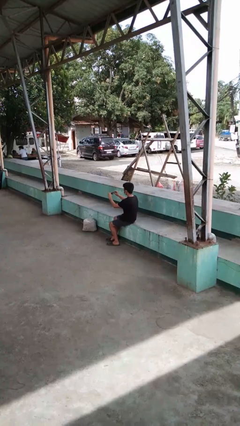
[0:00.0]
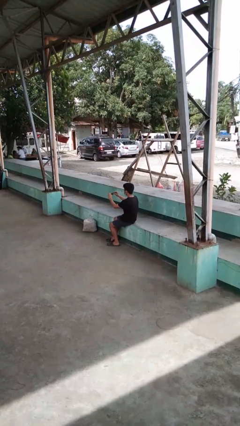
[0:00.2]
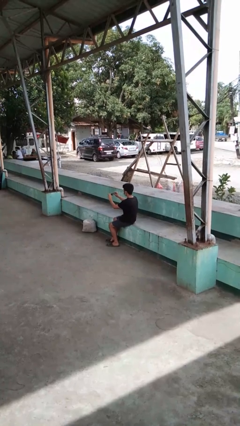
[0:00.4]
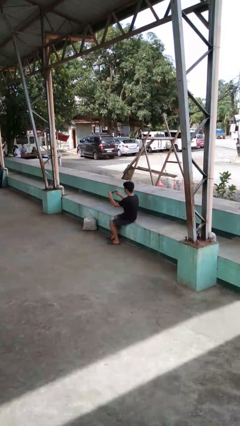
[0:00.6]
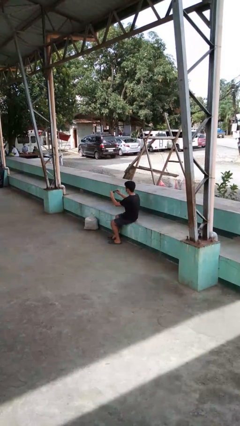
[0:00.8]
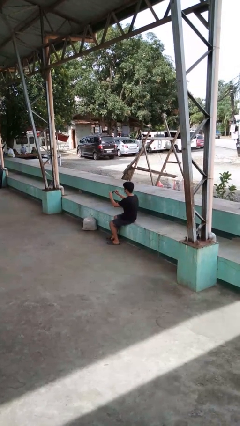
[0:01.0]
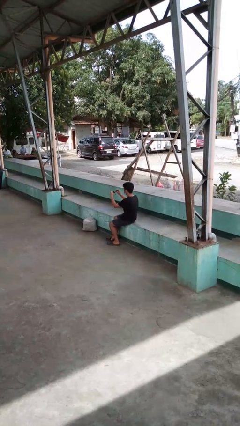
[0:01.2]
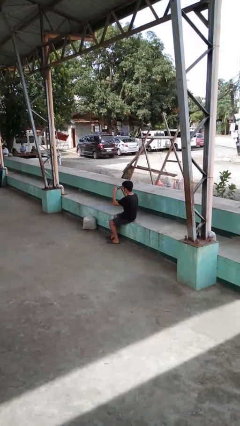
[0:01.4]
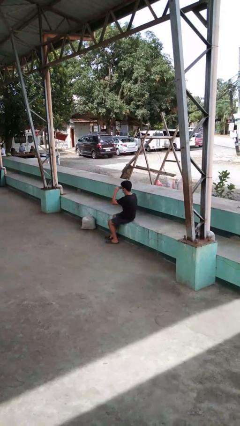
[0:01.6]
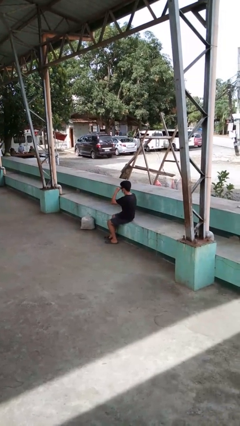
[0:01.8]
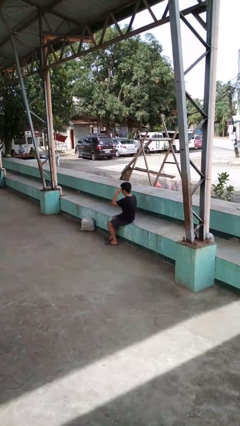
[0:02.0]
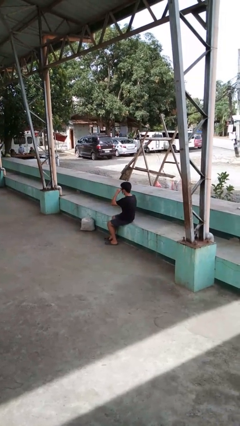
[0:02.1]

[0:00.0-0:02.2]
person brushes hair

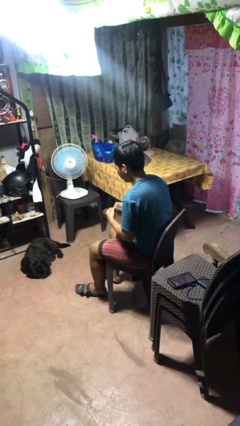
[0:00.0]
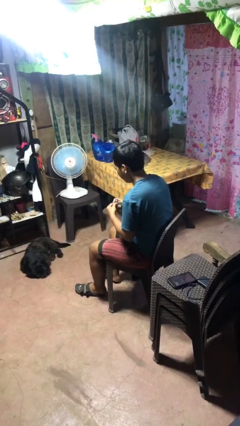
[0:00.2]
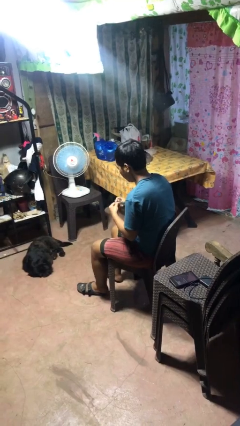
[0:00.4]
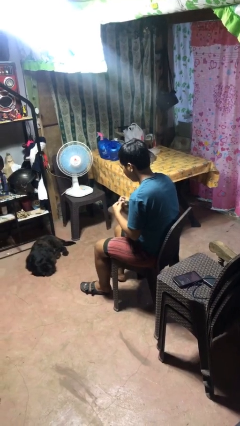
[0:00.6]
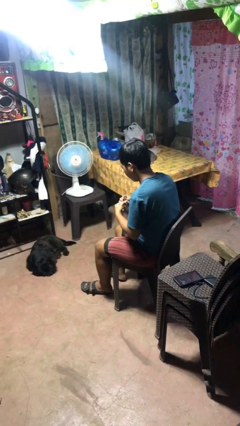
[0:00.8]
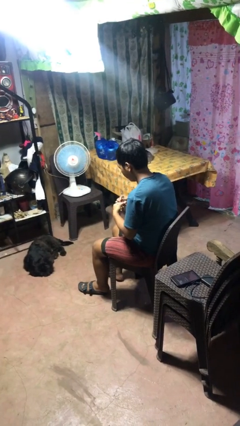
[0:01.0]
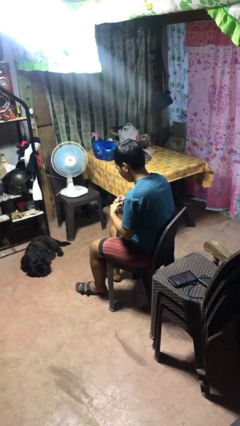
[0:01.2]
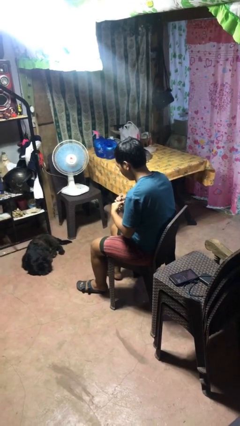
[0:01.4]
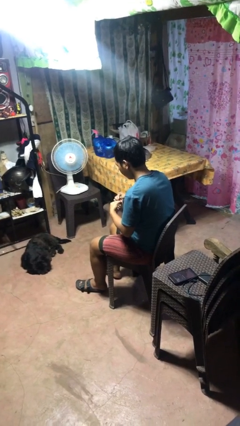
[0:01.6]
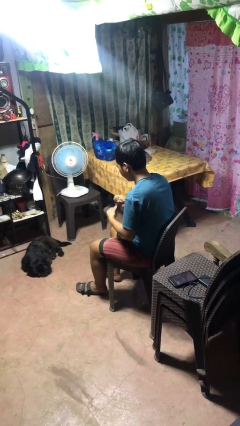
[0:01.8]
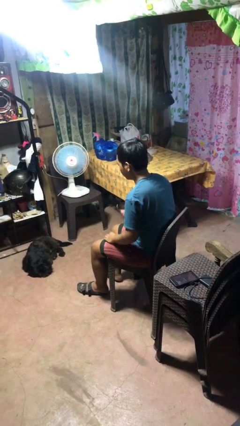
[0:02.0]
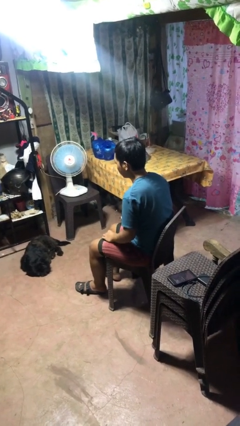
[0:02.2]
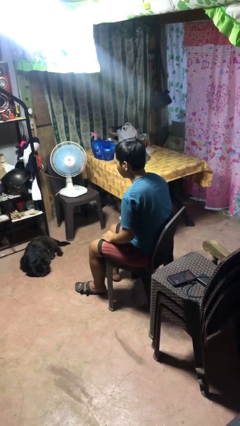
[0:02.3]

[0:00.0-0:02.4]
person files fingernails

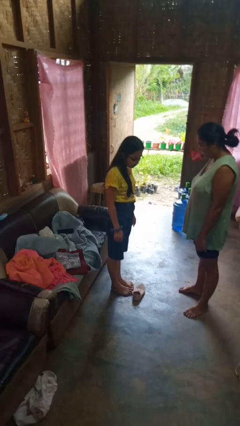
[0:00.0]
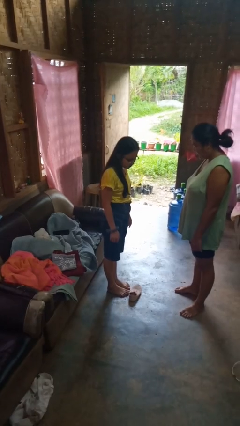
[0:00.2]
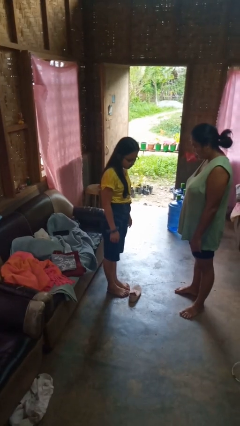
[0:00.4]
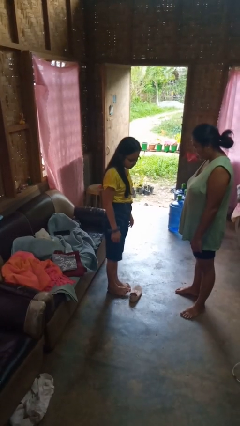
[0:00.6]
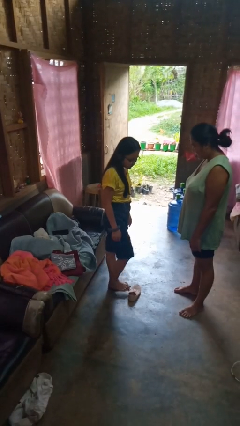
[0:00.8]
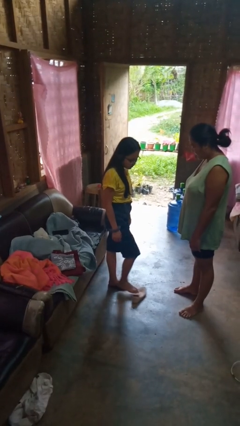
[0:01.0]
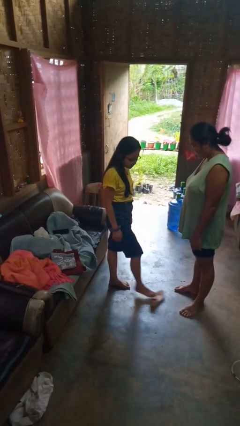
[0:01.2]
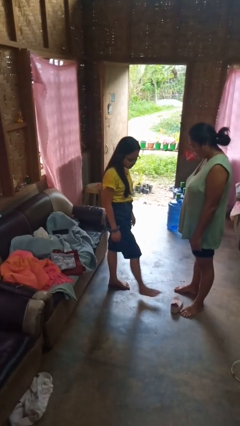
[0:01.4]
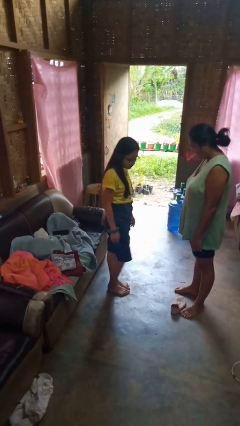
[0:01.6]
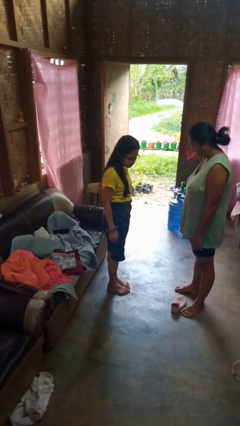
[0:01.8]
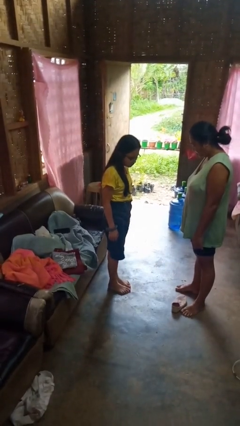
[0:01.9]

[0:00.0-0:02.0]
person kicks object to person

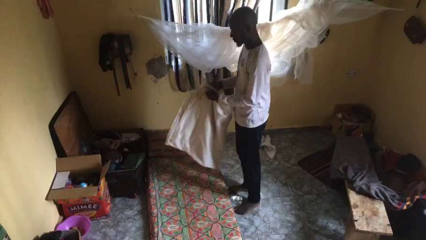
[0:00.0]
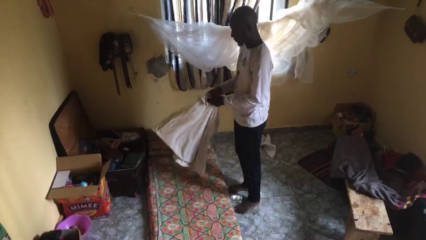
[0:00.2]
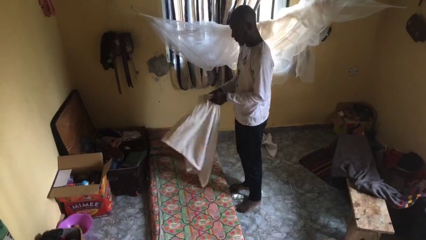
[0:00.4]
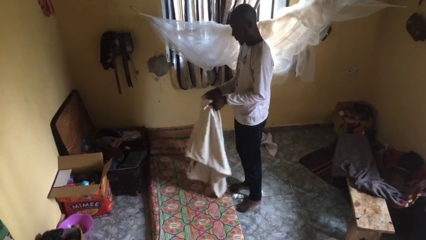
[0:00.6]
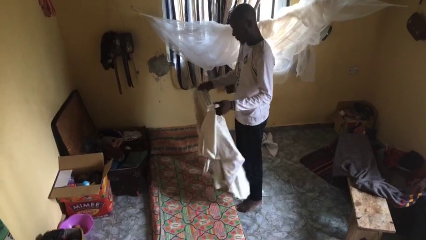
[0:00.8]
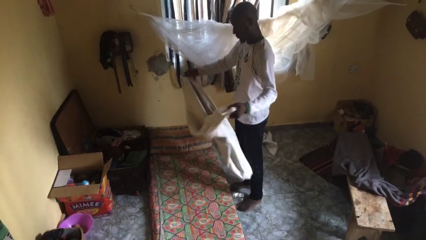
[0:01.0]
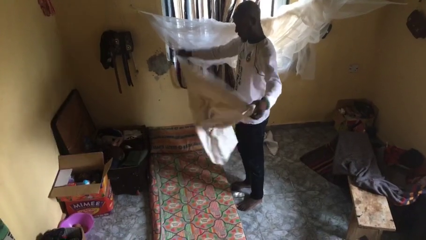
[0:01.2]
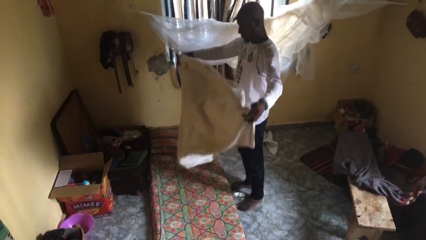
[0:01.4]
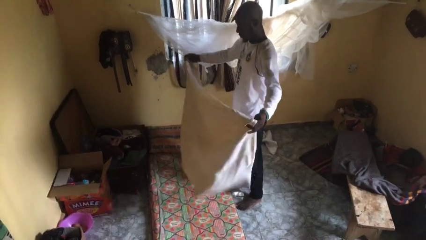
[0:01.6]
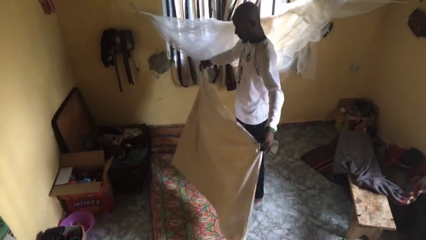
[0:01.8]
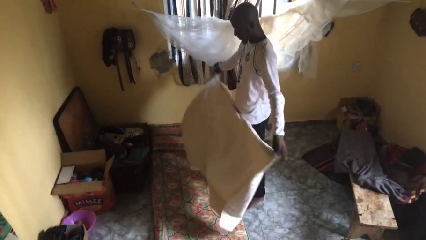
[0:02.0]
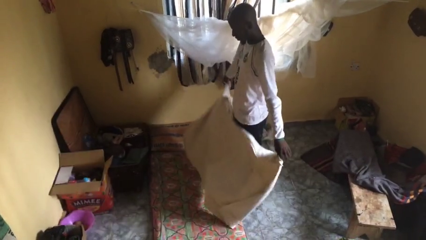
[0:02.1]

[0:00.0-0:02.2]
person unfolds blanket

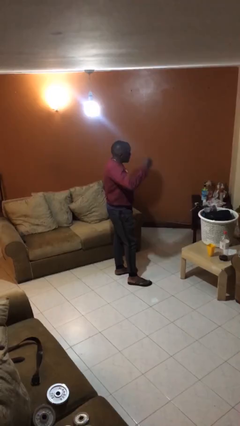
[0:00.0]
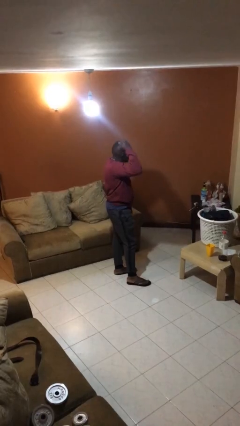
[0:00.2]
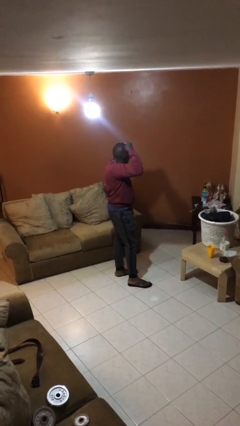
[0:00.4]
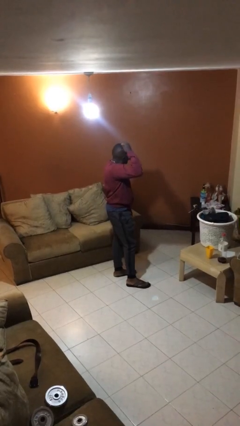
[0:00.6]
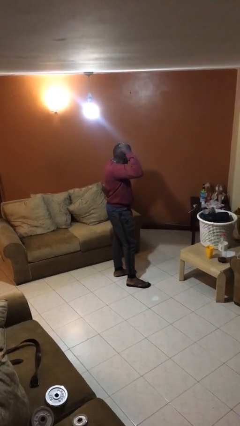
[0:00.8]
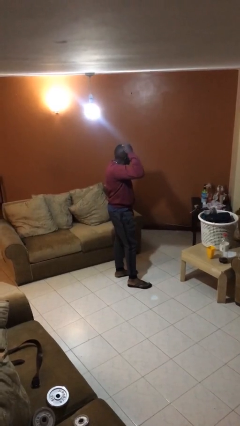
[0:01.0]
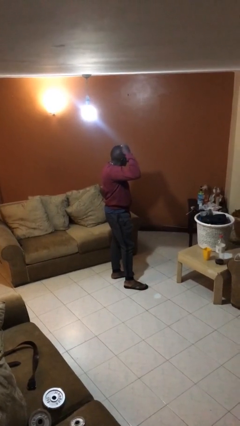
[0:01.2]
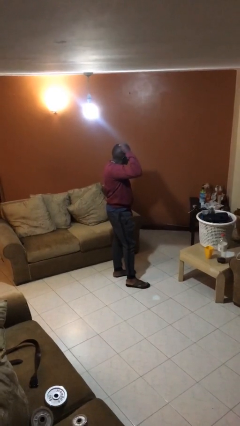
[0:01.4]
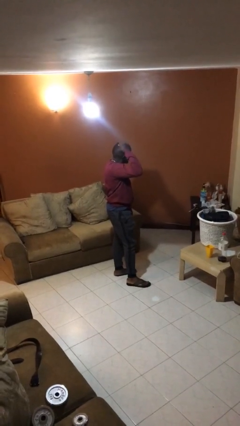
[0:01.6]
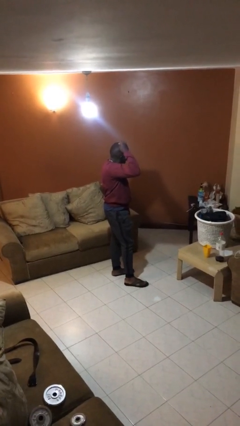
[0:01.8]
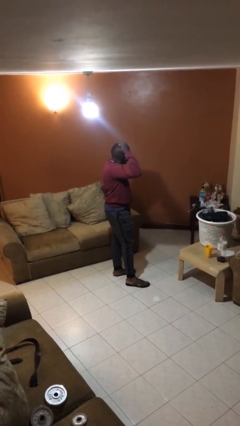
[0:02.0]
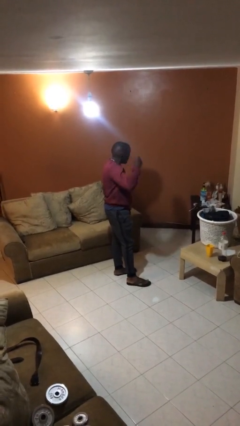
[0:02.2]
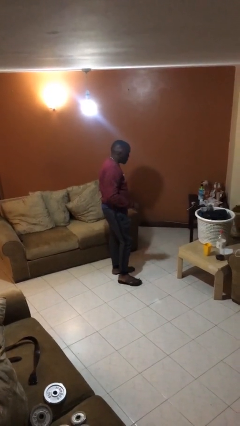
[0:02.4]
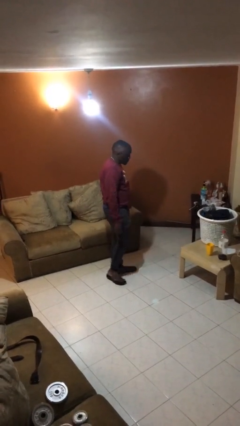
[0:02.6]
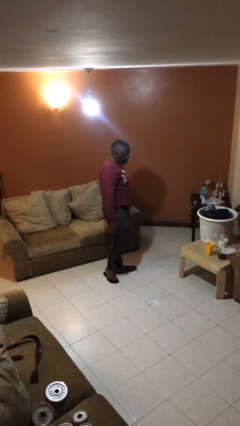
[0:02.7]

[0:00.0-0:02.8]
person scratches face

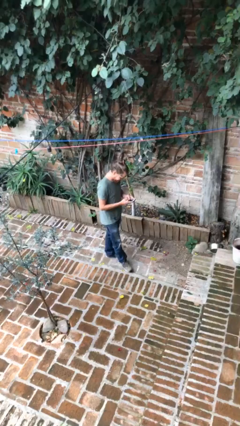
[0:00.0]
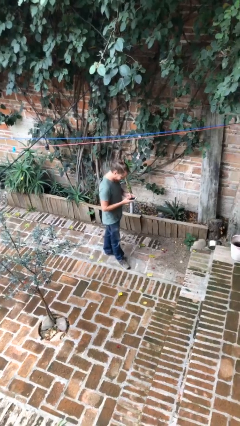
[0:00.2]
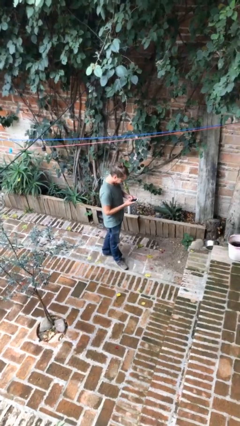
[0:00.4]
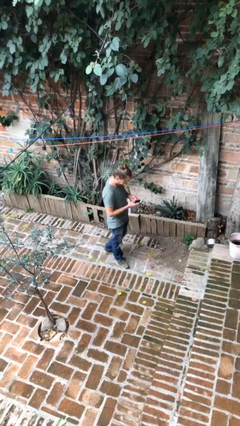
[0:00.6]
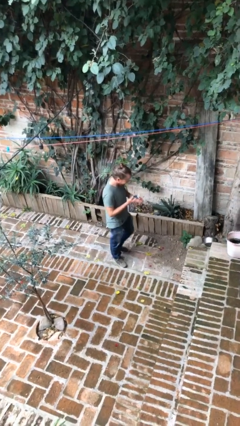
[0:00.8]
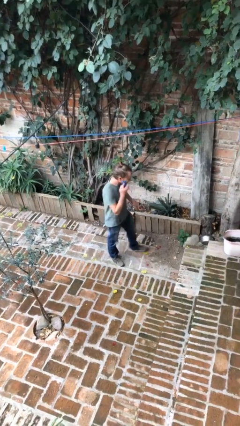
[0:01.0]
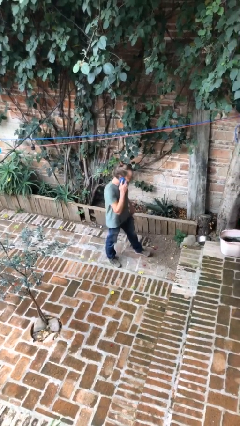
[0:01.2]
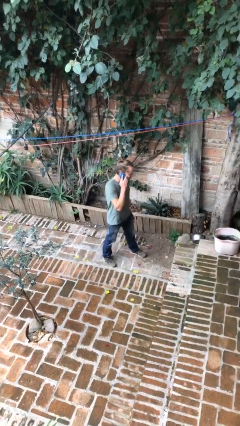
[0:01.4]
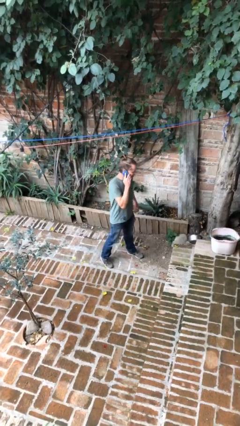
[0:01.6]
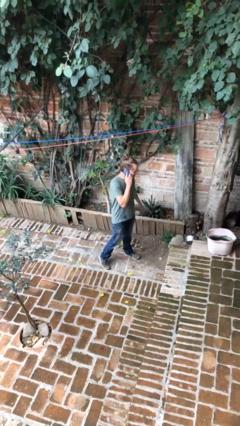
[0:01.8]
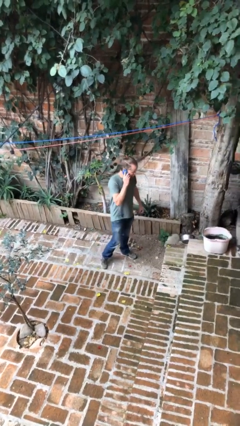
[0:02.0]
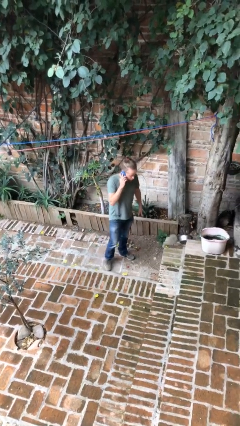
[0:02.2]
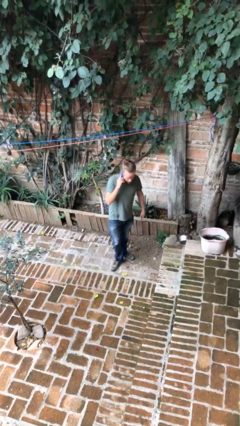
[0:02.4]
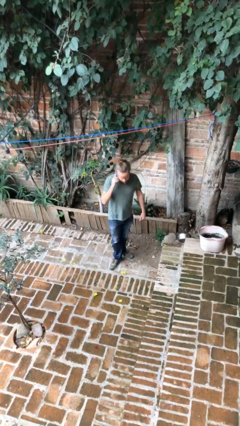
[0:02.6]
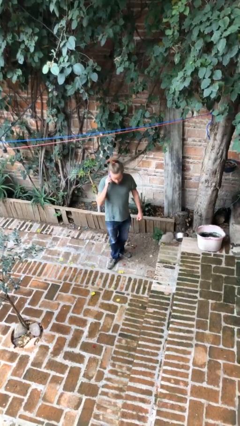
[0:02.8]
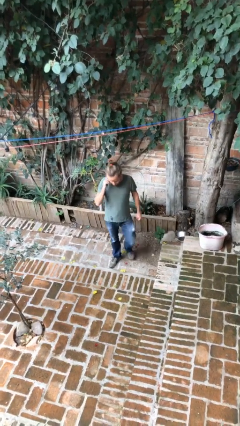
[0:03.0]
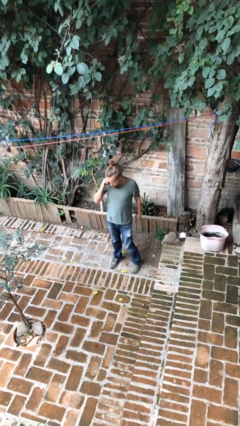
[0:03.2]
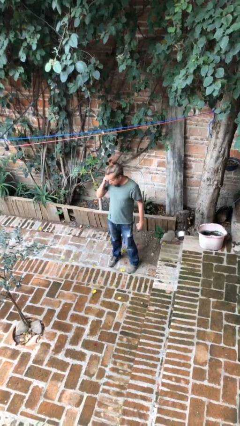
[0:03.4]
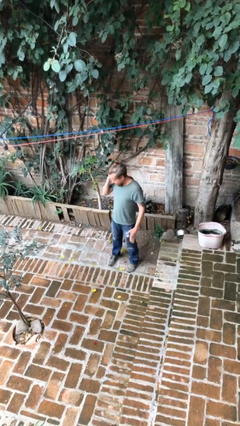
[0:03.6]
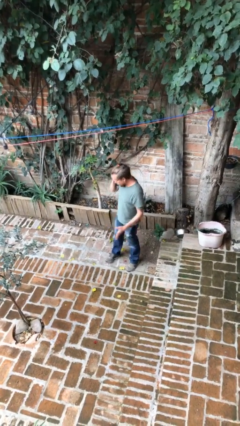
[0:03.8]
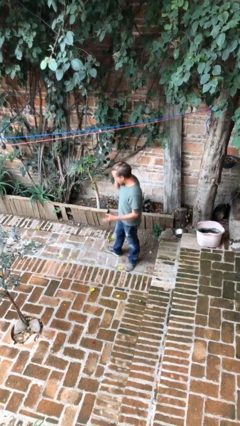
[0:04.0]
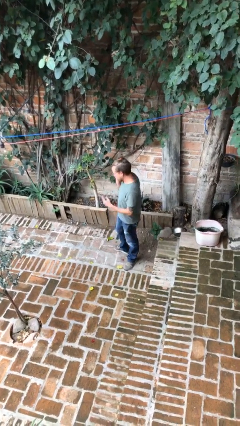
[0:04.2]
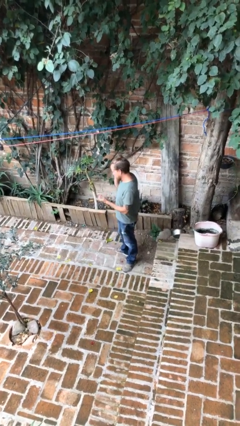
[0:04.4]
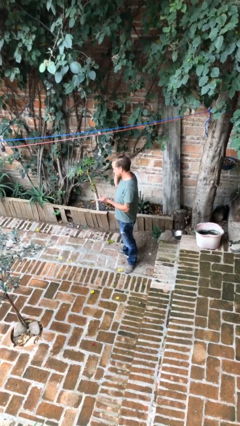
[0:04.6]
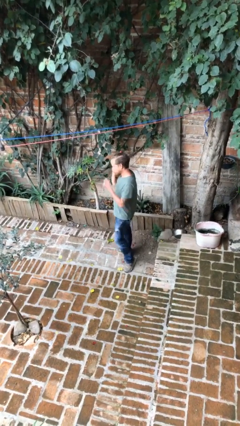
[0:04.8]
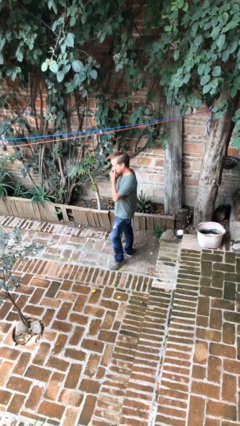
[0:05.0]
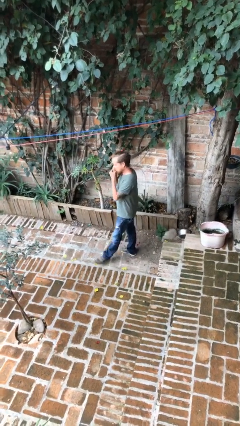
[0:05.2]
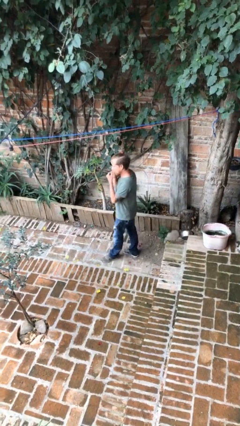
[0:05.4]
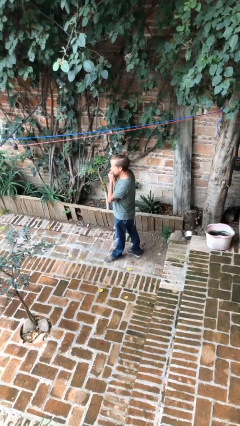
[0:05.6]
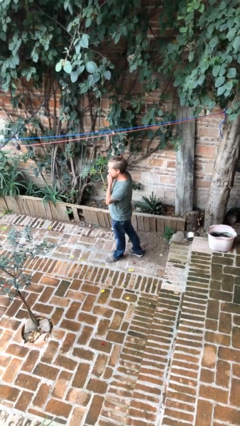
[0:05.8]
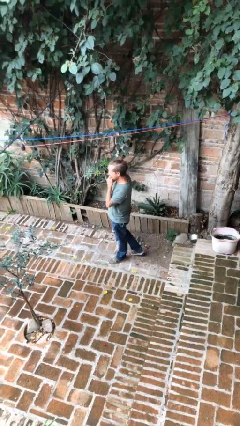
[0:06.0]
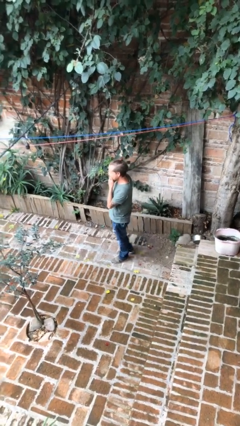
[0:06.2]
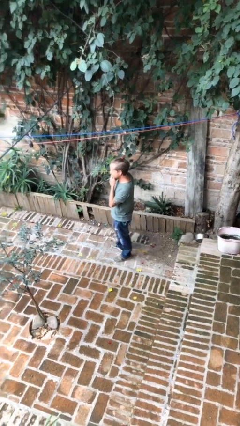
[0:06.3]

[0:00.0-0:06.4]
person talks on phone
